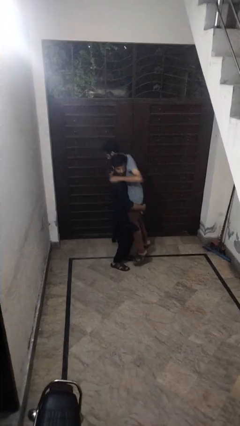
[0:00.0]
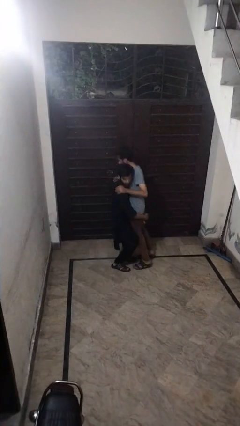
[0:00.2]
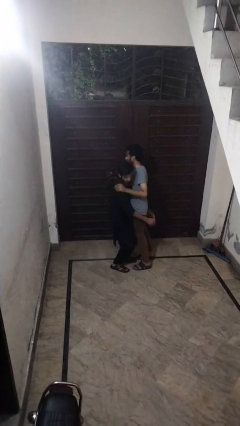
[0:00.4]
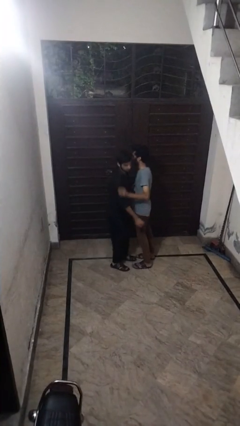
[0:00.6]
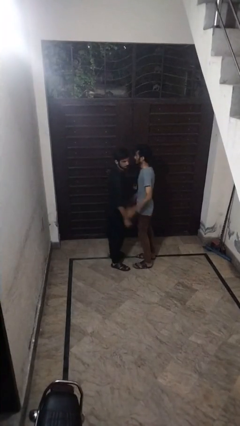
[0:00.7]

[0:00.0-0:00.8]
person puts down person

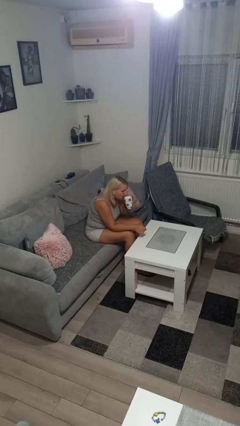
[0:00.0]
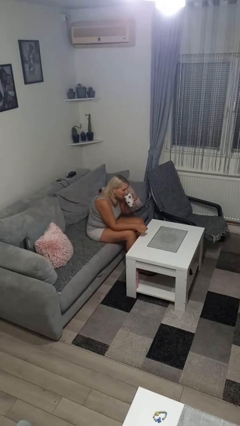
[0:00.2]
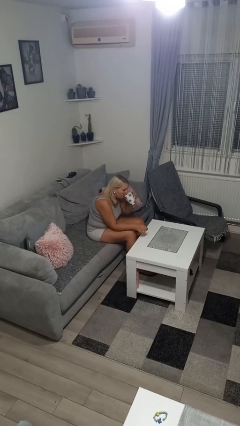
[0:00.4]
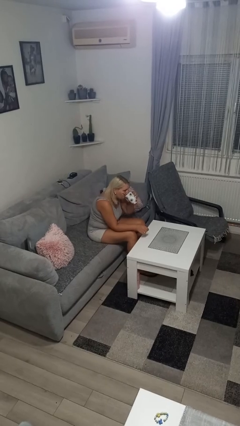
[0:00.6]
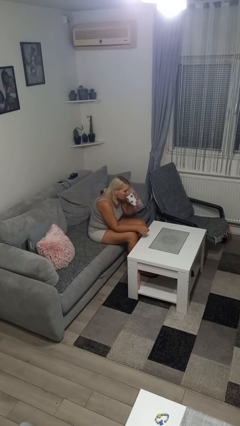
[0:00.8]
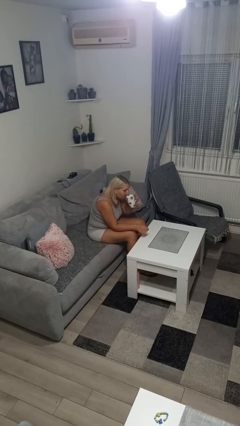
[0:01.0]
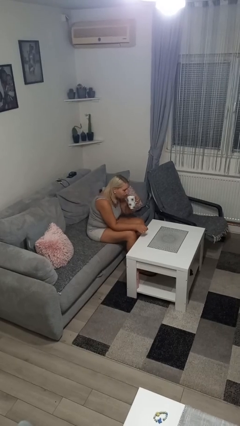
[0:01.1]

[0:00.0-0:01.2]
person drinks from mug

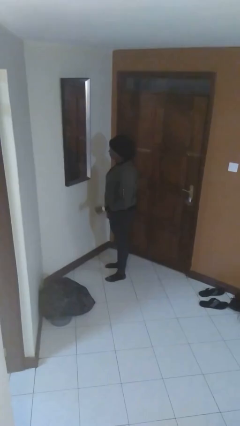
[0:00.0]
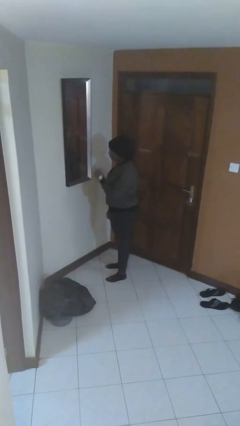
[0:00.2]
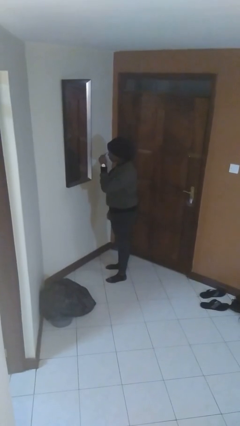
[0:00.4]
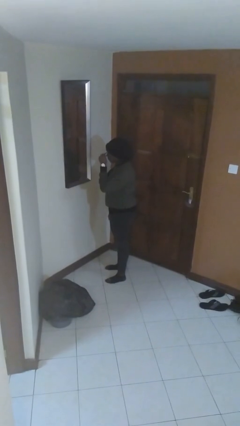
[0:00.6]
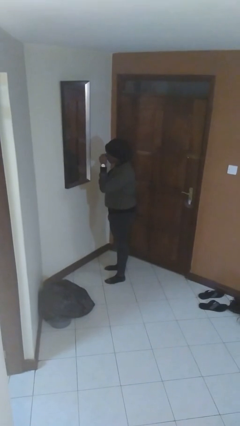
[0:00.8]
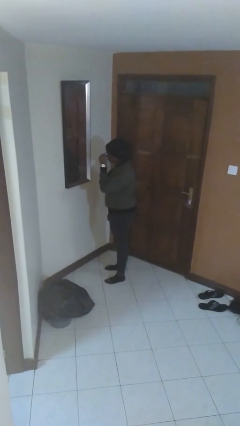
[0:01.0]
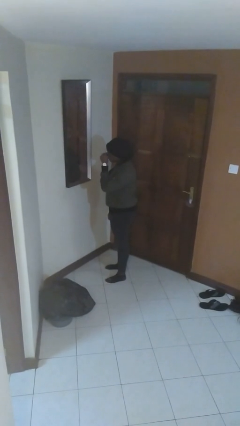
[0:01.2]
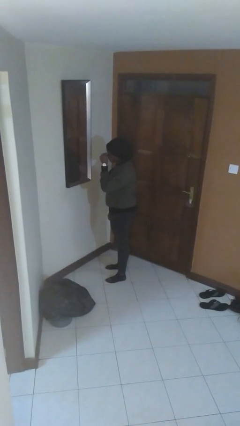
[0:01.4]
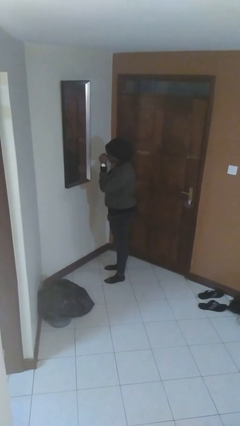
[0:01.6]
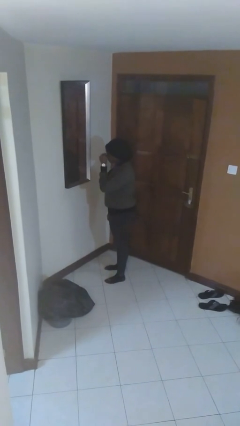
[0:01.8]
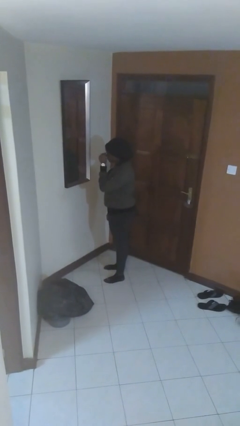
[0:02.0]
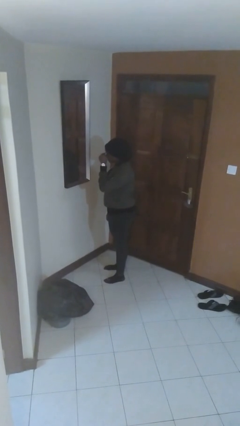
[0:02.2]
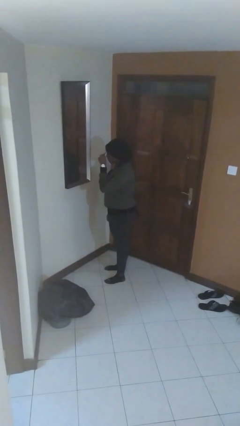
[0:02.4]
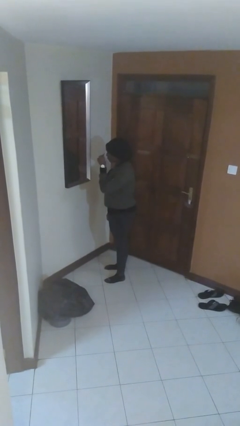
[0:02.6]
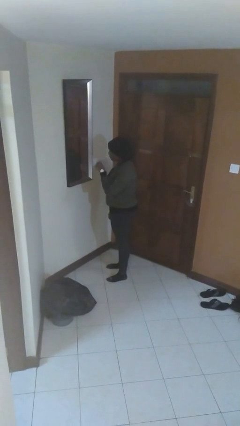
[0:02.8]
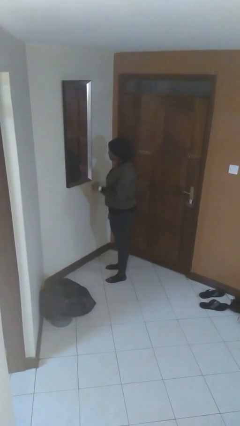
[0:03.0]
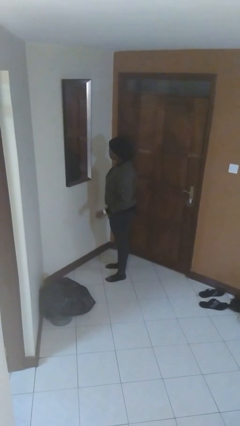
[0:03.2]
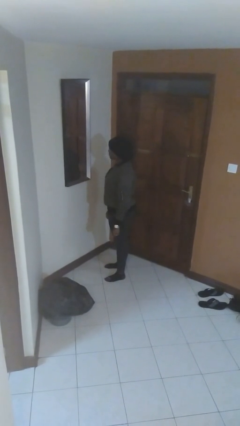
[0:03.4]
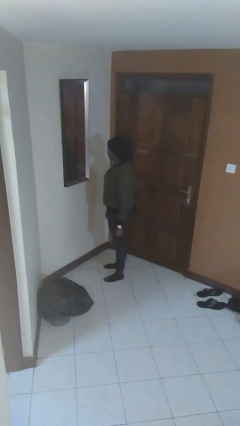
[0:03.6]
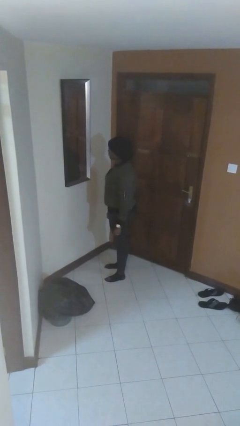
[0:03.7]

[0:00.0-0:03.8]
person applies eye makeup

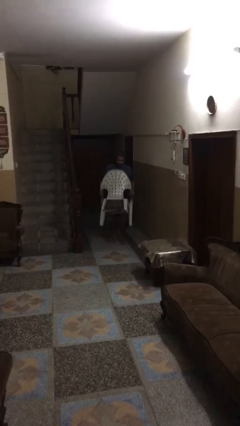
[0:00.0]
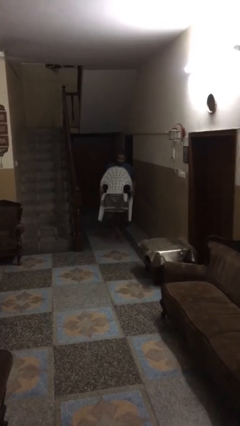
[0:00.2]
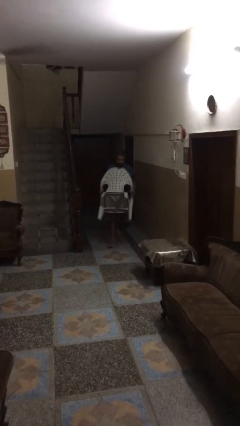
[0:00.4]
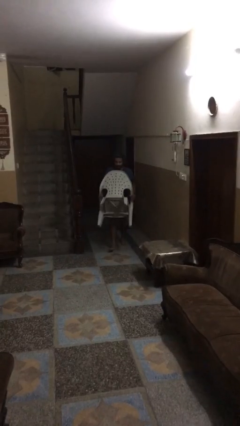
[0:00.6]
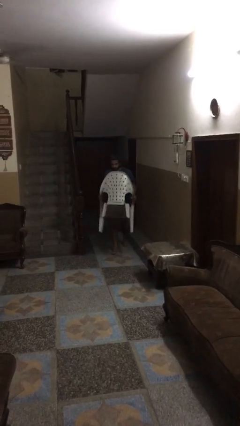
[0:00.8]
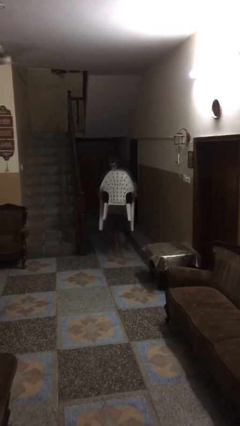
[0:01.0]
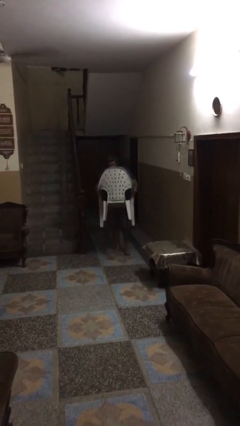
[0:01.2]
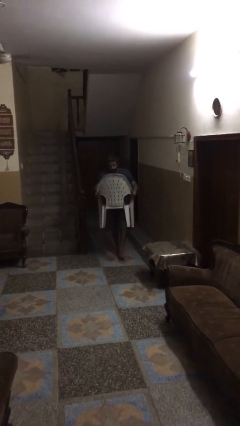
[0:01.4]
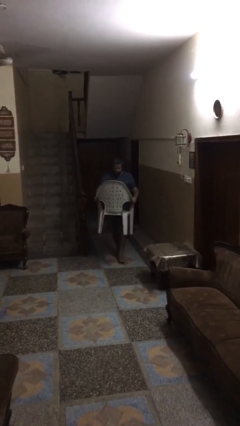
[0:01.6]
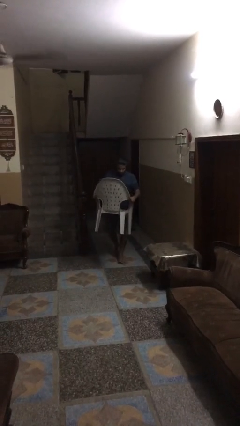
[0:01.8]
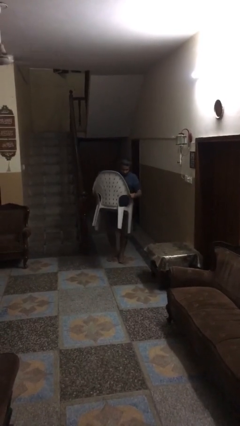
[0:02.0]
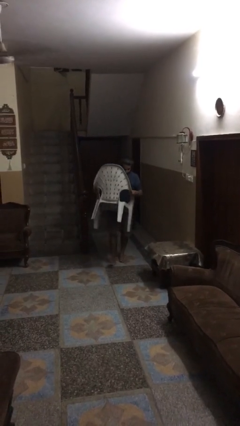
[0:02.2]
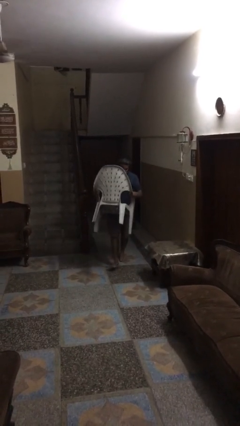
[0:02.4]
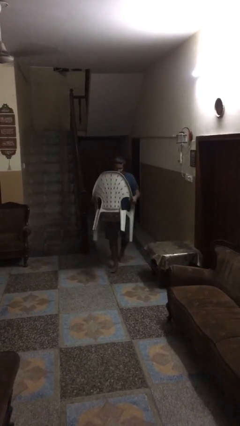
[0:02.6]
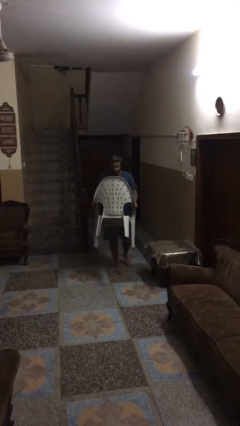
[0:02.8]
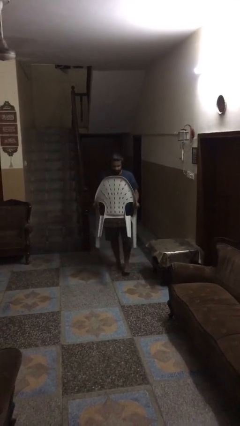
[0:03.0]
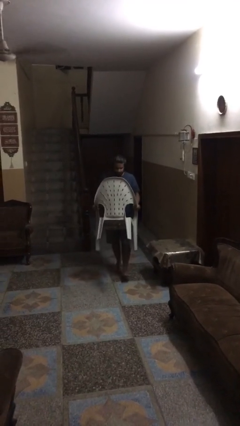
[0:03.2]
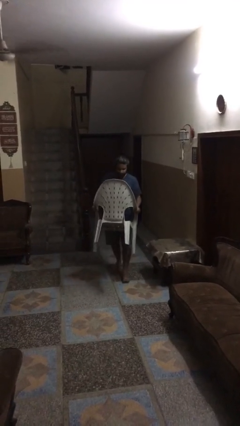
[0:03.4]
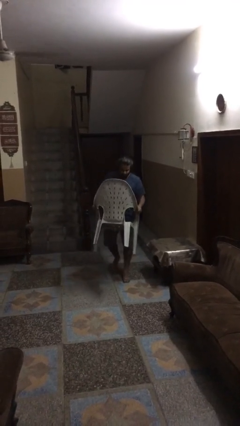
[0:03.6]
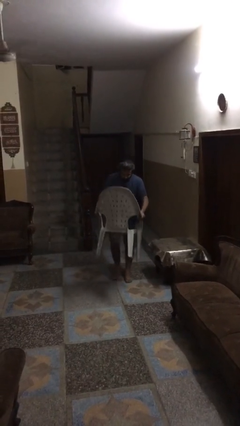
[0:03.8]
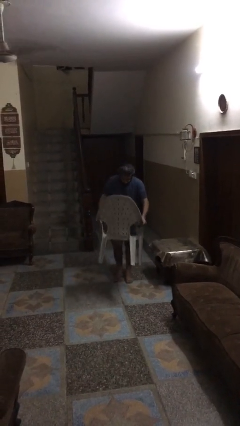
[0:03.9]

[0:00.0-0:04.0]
person carries heavy object

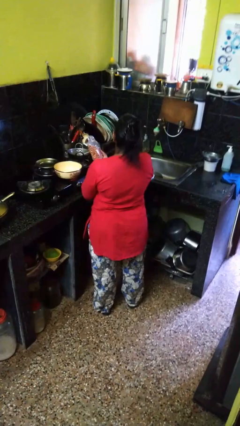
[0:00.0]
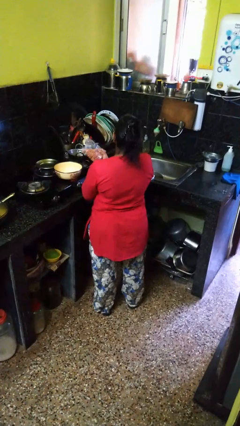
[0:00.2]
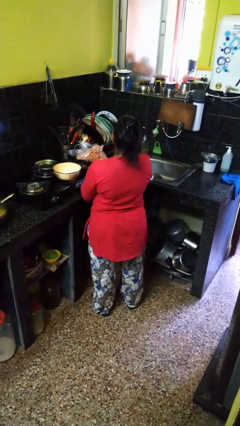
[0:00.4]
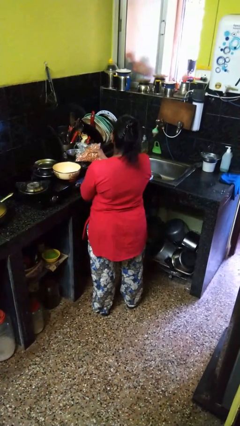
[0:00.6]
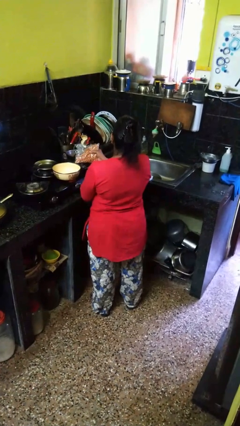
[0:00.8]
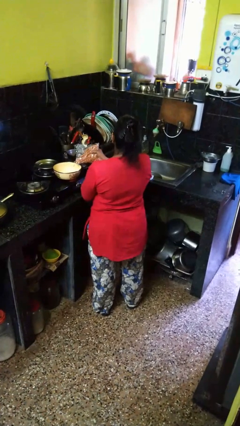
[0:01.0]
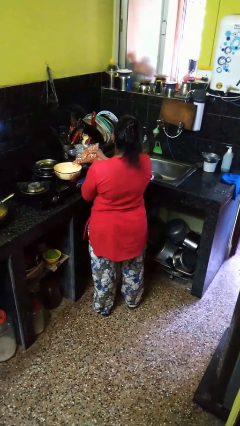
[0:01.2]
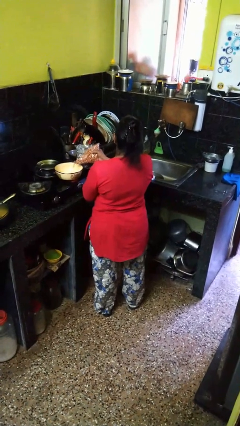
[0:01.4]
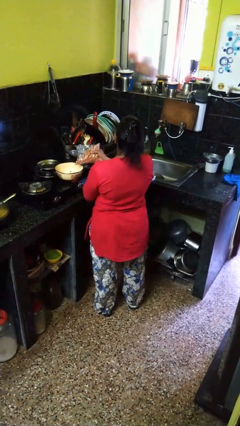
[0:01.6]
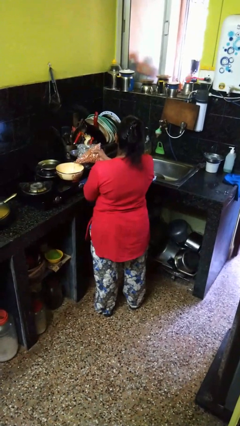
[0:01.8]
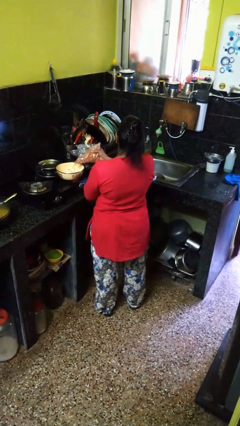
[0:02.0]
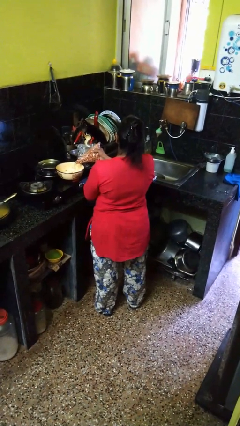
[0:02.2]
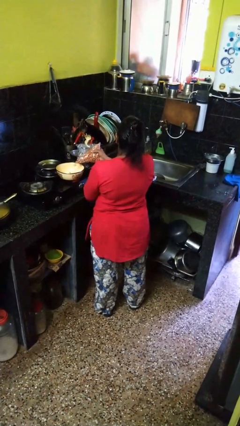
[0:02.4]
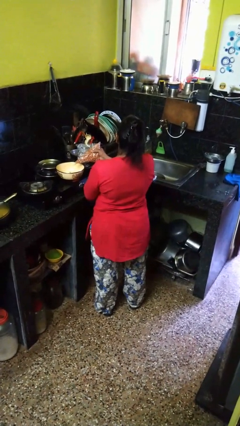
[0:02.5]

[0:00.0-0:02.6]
person pours into bowl

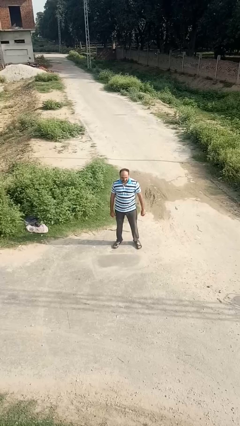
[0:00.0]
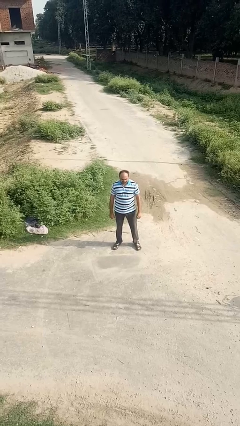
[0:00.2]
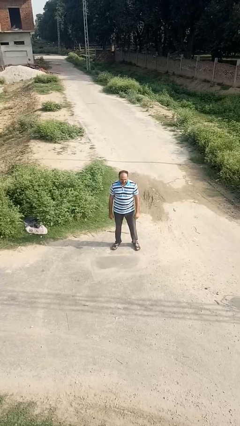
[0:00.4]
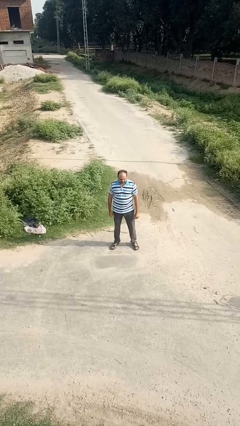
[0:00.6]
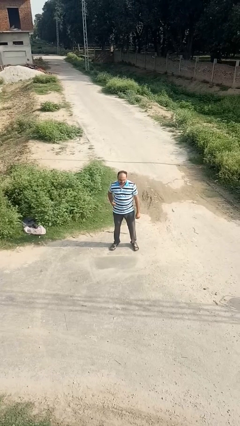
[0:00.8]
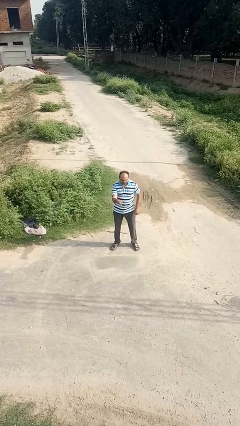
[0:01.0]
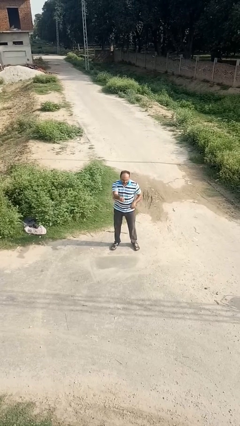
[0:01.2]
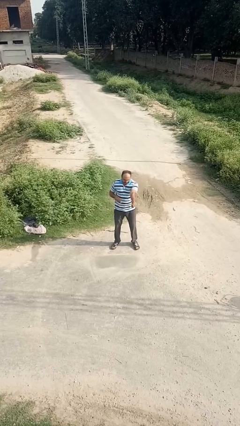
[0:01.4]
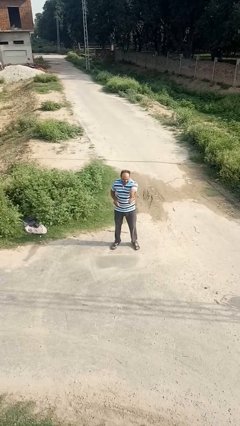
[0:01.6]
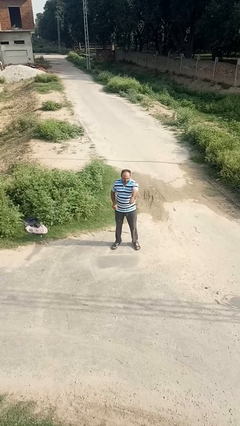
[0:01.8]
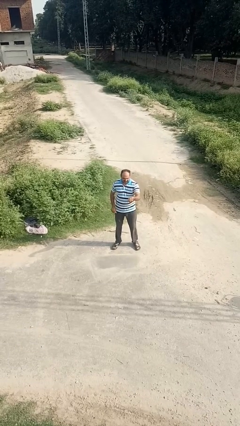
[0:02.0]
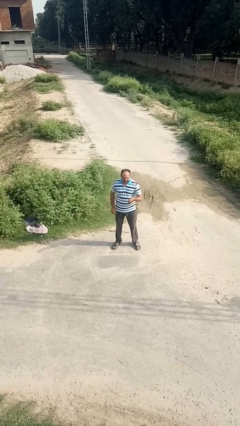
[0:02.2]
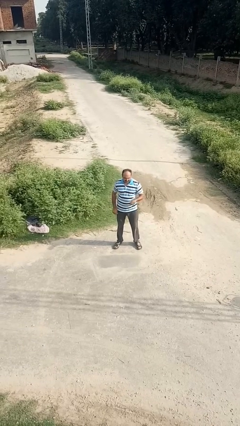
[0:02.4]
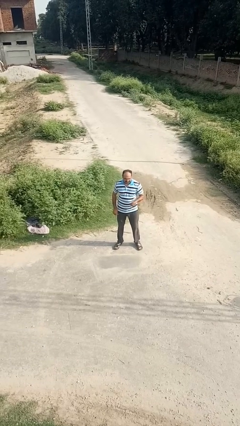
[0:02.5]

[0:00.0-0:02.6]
person punches

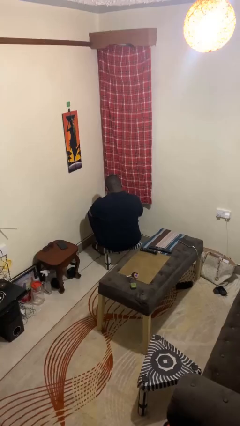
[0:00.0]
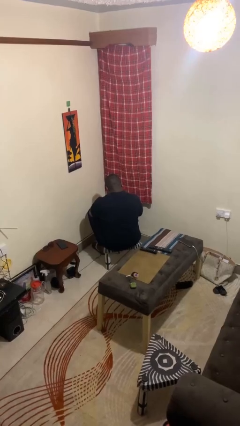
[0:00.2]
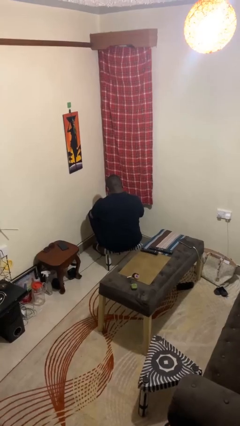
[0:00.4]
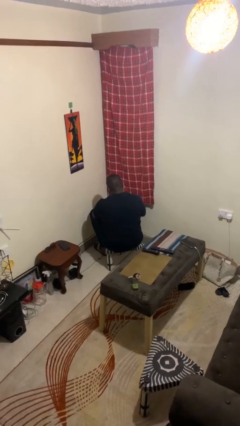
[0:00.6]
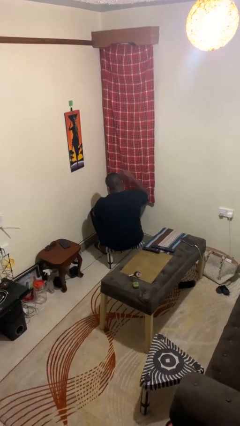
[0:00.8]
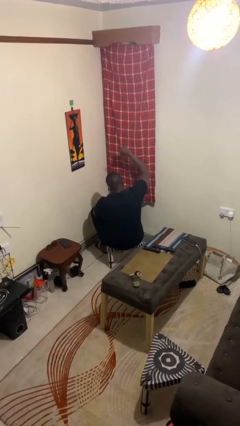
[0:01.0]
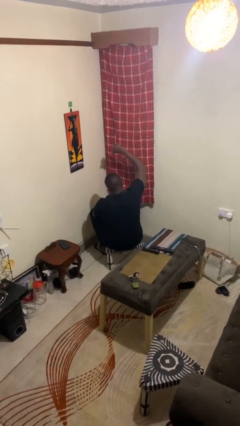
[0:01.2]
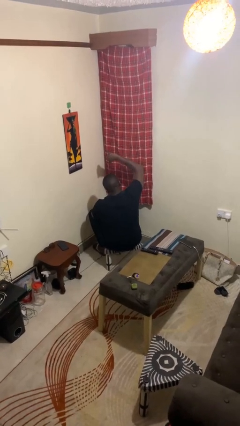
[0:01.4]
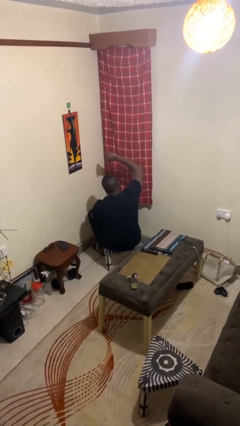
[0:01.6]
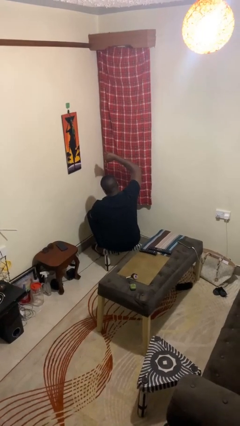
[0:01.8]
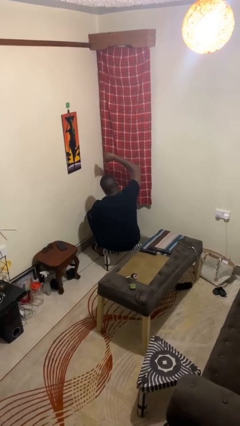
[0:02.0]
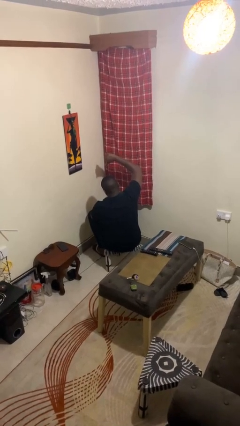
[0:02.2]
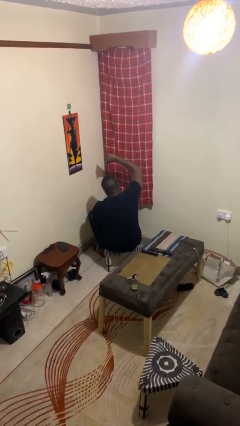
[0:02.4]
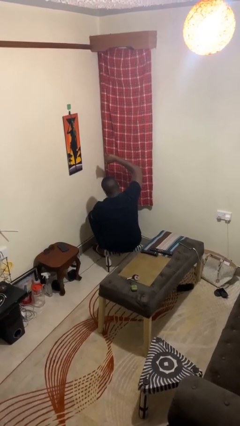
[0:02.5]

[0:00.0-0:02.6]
person gestures thumbs down
